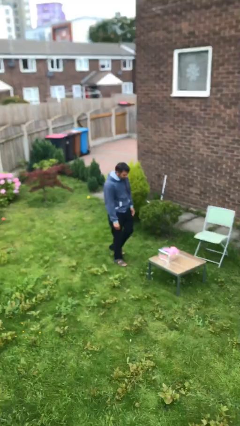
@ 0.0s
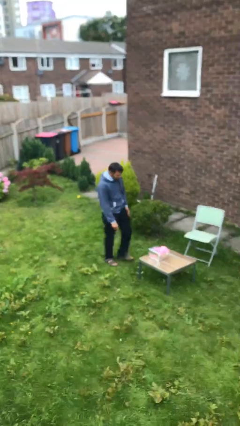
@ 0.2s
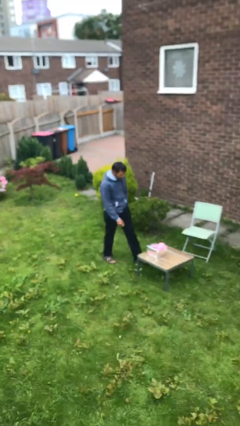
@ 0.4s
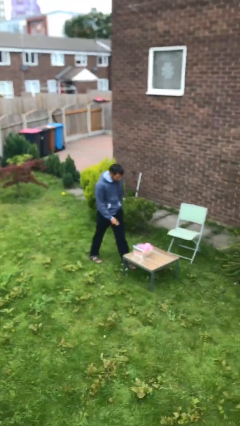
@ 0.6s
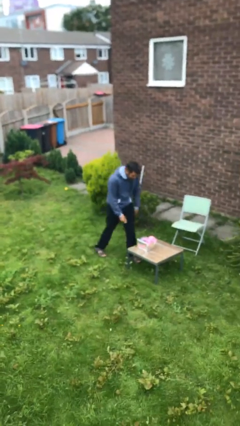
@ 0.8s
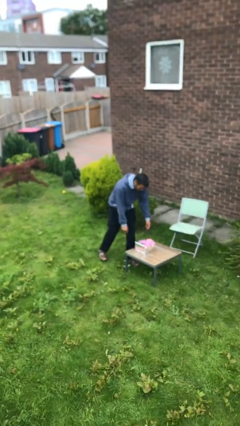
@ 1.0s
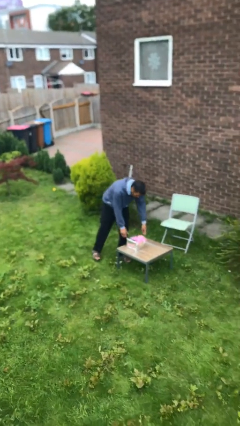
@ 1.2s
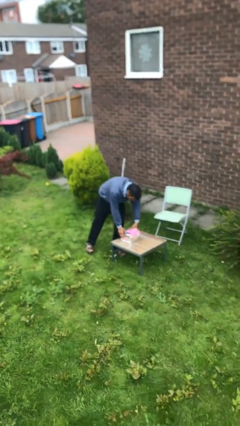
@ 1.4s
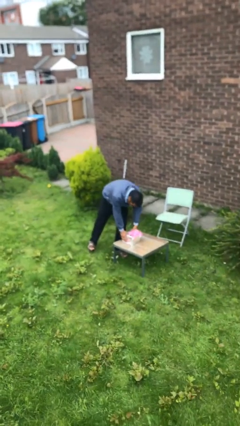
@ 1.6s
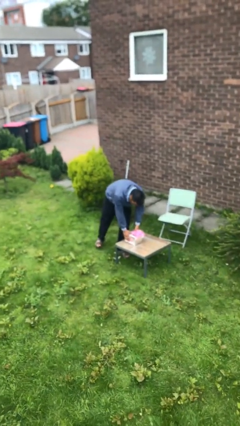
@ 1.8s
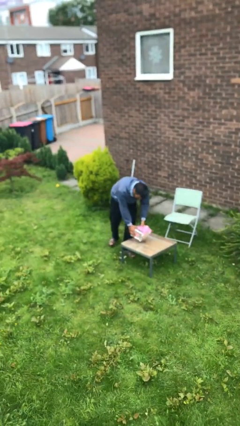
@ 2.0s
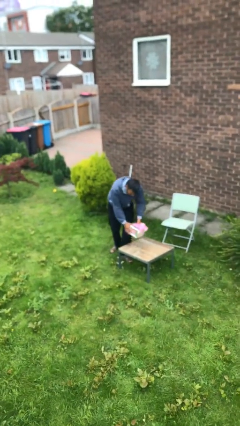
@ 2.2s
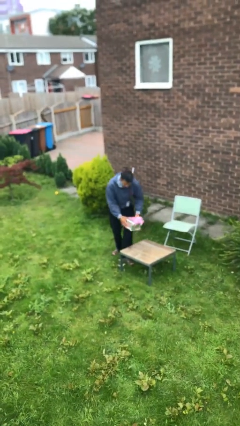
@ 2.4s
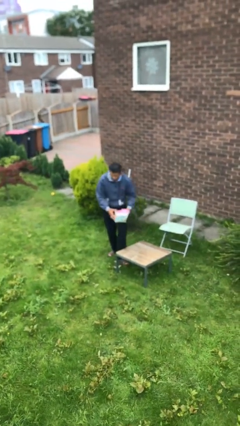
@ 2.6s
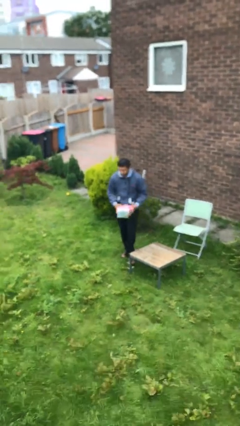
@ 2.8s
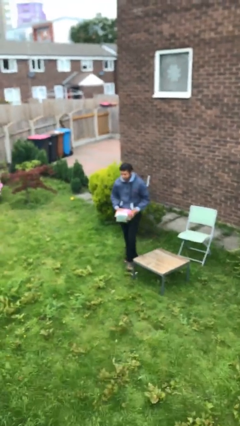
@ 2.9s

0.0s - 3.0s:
person picks up object from table

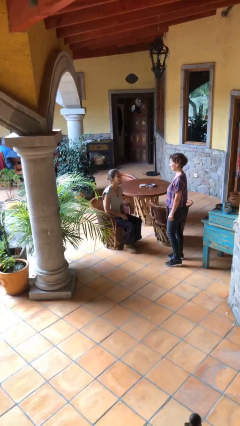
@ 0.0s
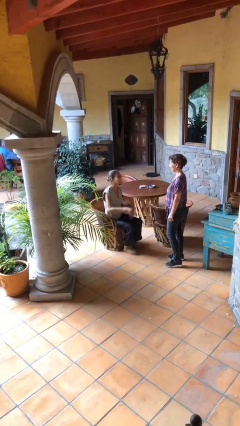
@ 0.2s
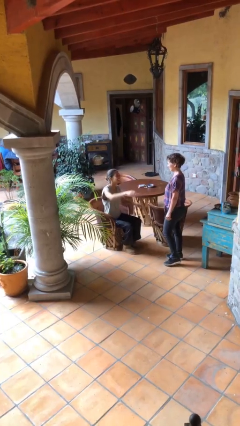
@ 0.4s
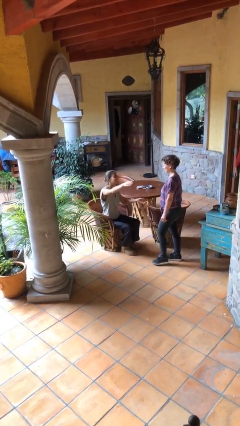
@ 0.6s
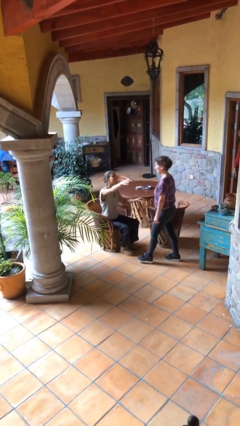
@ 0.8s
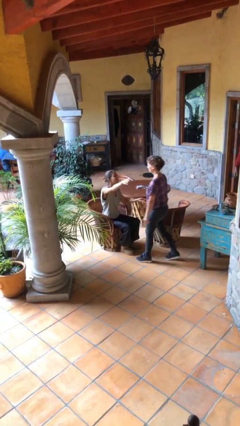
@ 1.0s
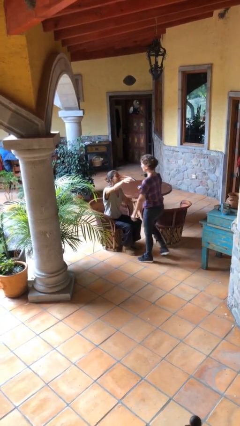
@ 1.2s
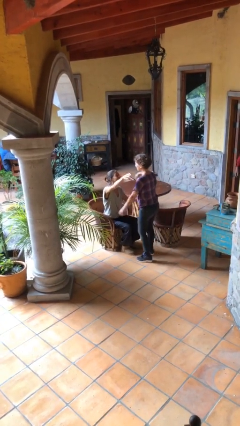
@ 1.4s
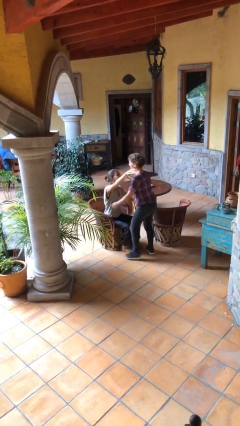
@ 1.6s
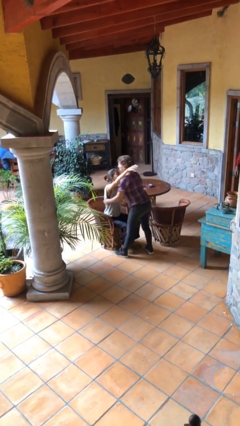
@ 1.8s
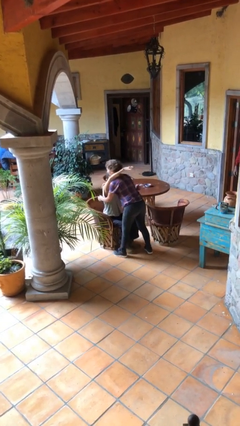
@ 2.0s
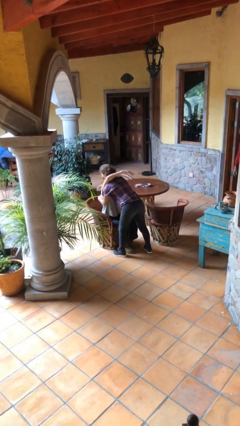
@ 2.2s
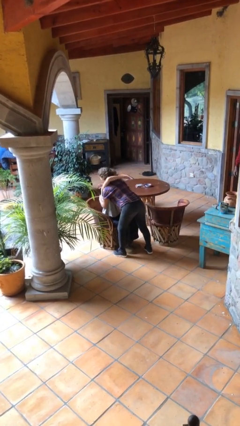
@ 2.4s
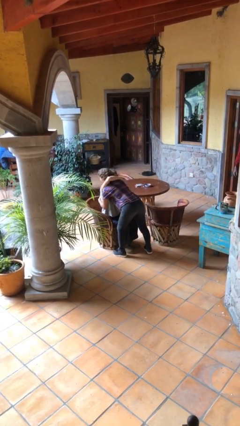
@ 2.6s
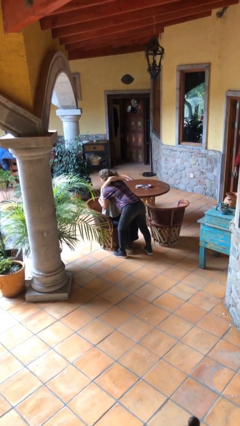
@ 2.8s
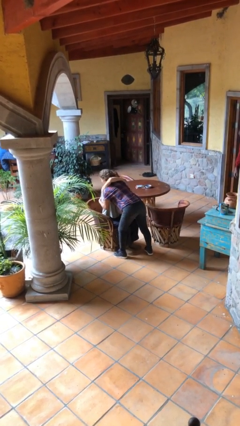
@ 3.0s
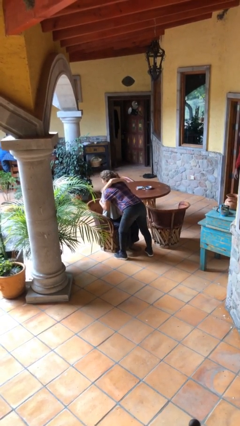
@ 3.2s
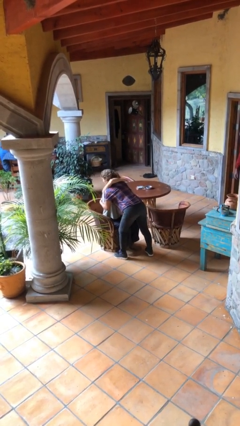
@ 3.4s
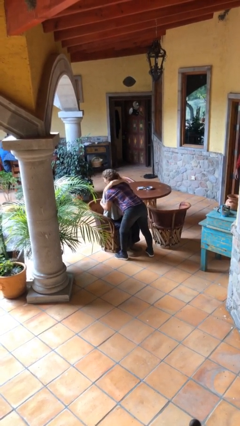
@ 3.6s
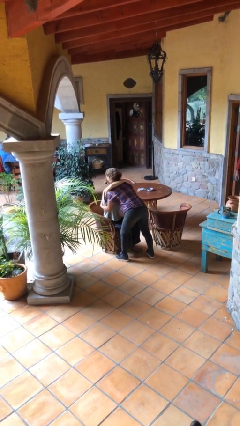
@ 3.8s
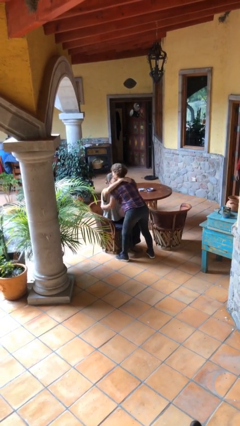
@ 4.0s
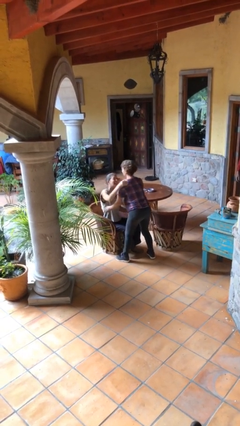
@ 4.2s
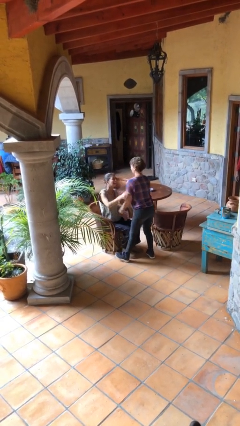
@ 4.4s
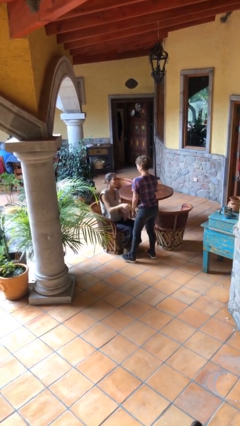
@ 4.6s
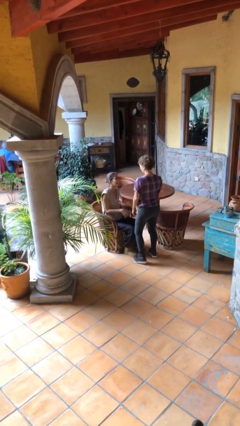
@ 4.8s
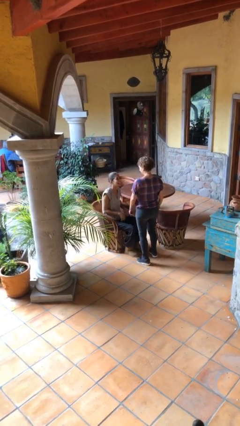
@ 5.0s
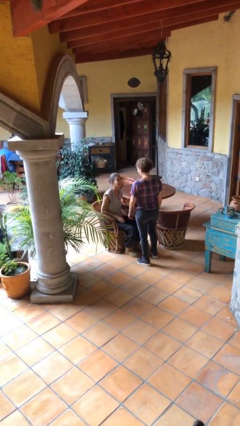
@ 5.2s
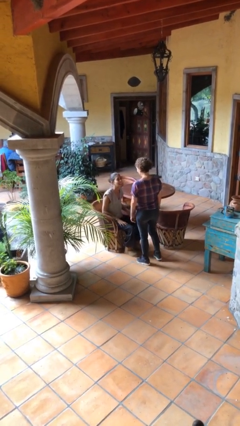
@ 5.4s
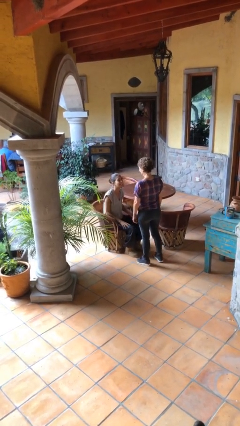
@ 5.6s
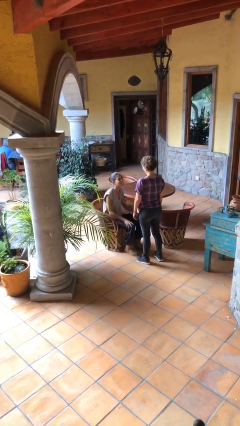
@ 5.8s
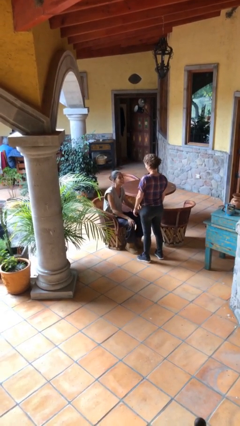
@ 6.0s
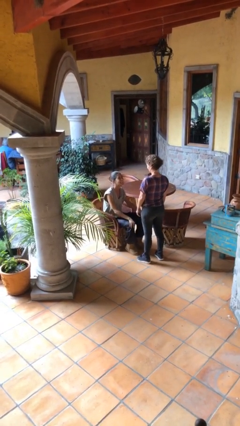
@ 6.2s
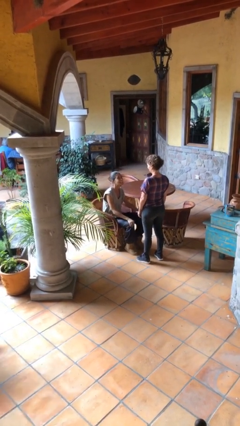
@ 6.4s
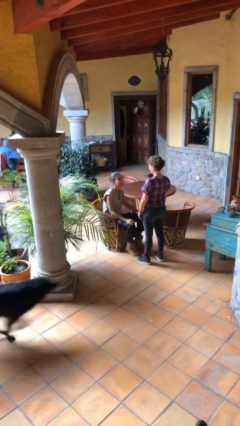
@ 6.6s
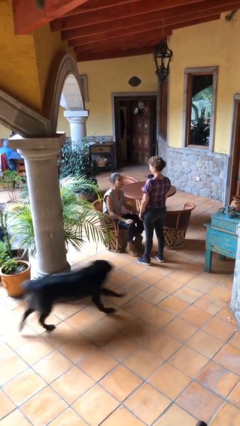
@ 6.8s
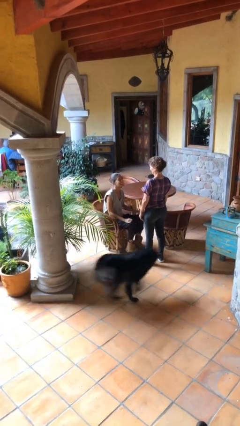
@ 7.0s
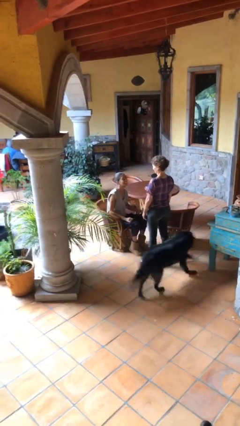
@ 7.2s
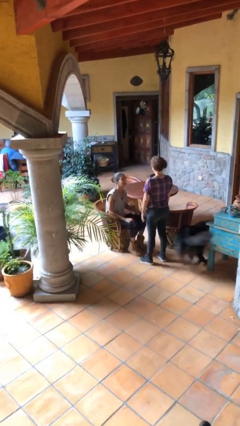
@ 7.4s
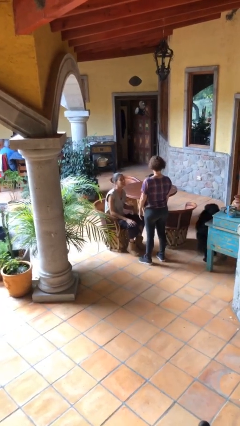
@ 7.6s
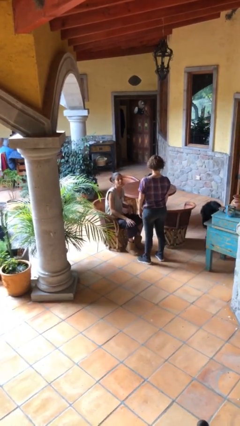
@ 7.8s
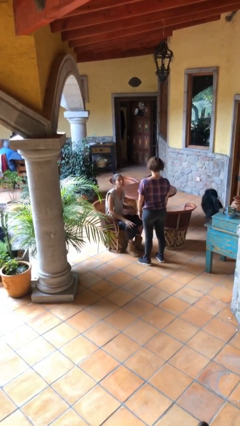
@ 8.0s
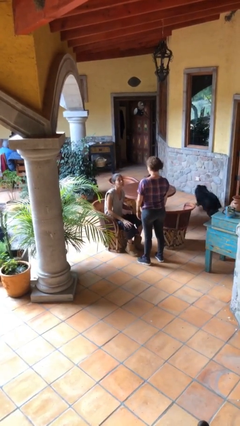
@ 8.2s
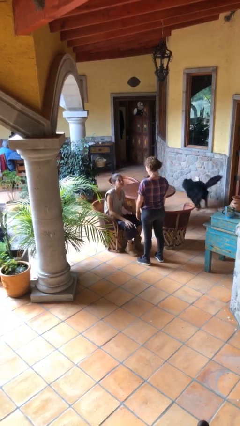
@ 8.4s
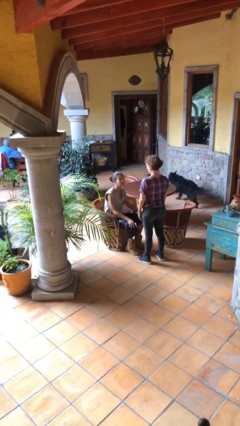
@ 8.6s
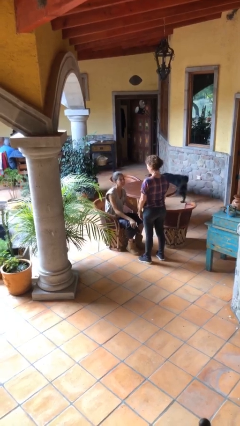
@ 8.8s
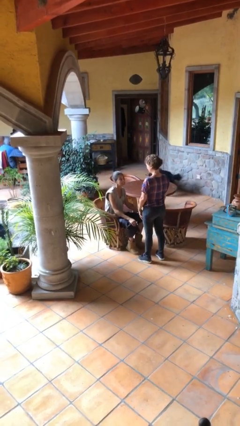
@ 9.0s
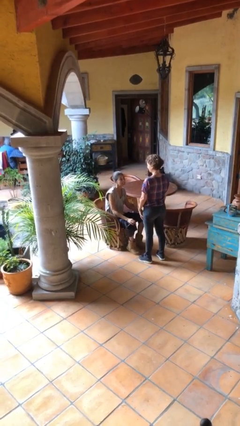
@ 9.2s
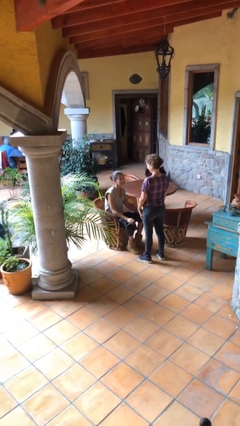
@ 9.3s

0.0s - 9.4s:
person embraces person

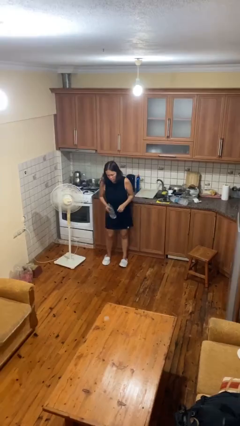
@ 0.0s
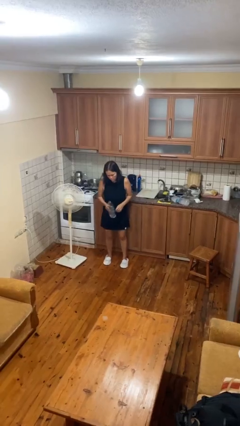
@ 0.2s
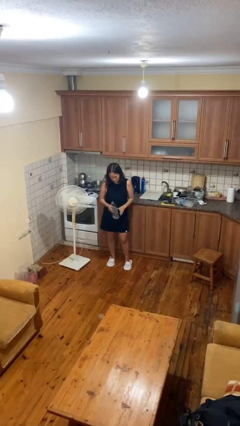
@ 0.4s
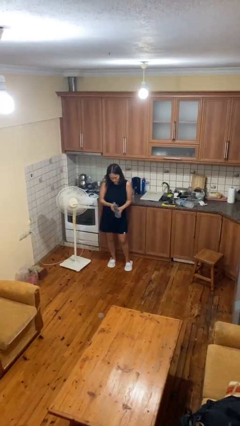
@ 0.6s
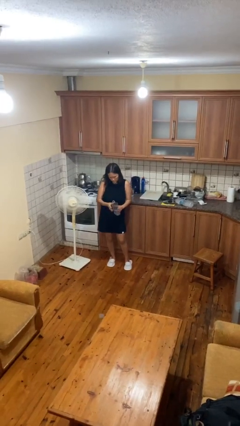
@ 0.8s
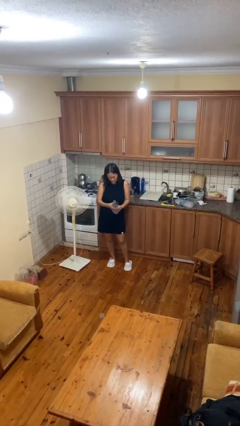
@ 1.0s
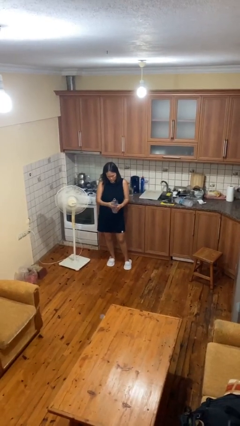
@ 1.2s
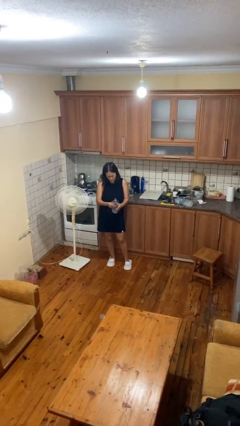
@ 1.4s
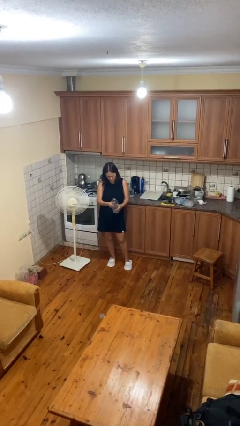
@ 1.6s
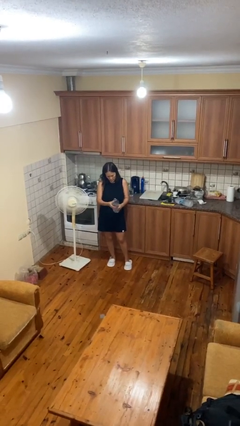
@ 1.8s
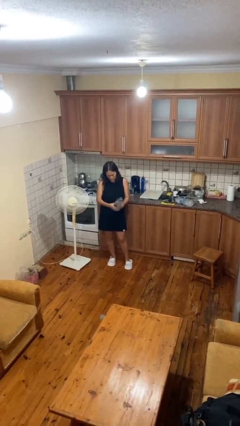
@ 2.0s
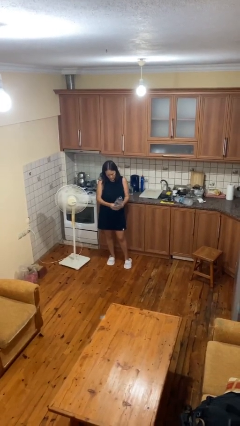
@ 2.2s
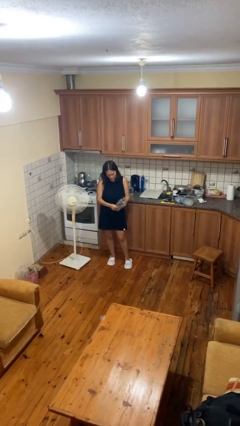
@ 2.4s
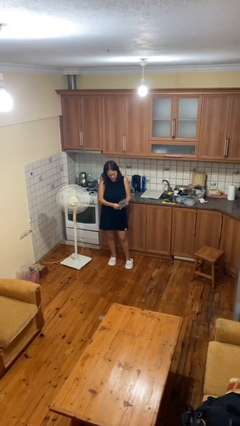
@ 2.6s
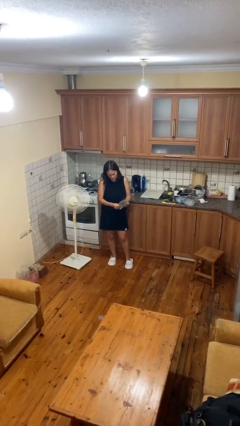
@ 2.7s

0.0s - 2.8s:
person squeezes object

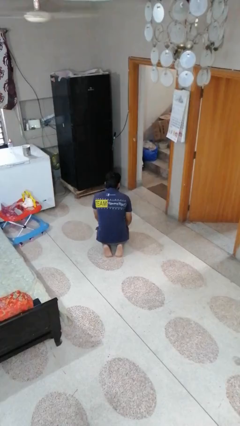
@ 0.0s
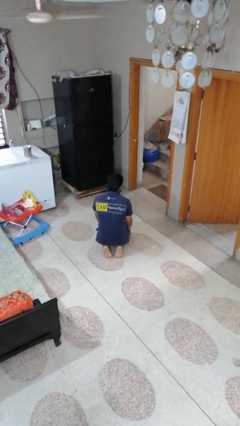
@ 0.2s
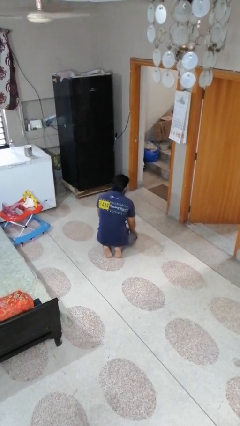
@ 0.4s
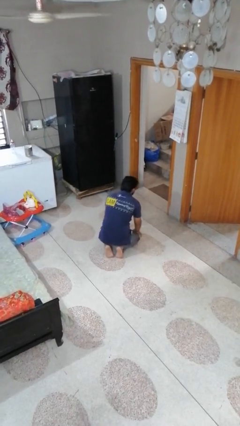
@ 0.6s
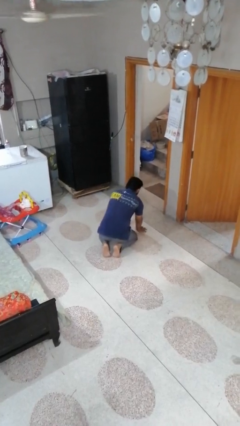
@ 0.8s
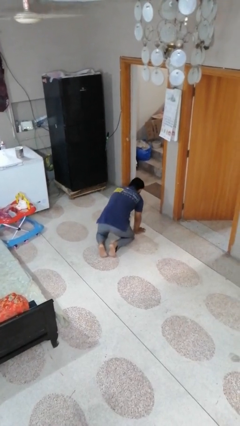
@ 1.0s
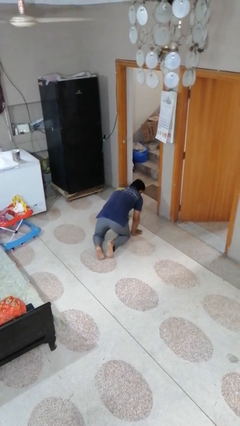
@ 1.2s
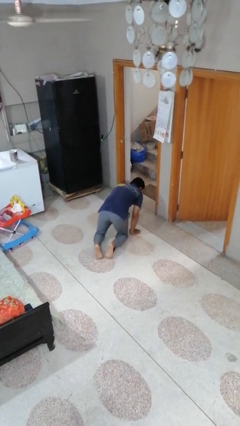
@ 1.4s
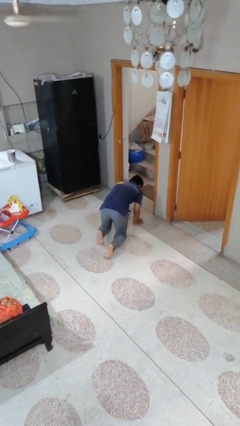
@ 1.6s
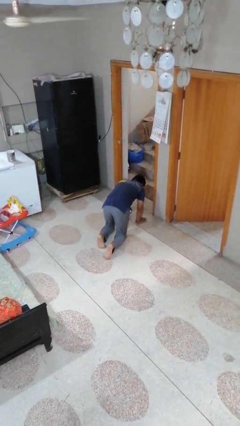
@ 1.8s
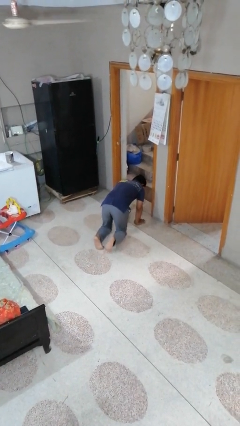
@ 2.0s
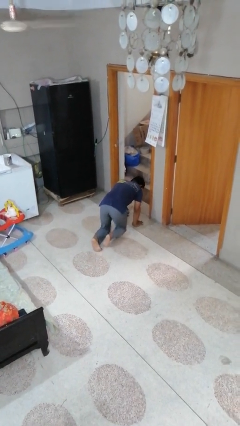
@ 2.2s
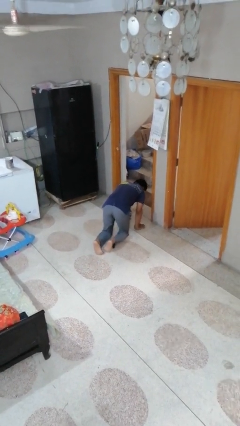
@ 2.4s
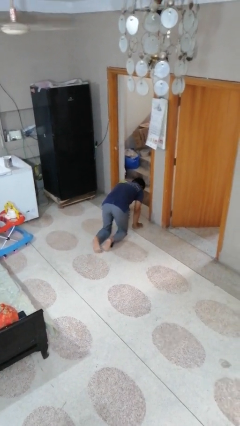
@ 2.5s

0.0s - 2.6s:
person crawls
